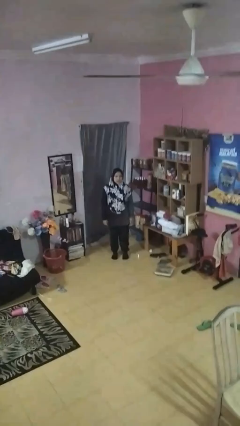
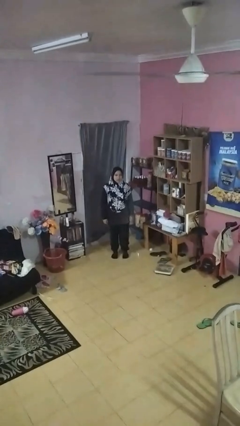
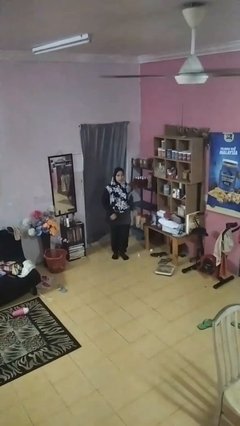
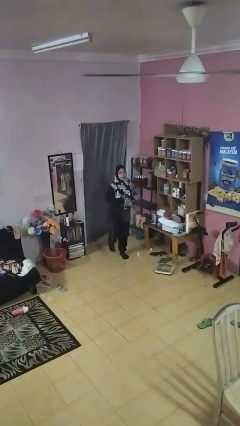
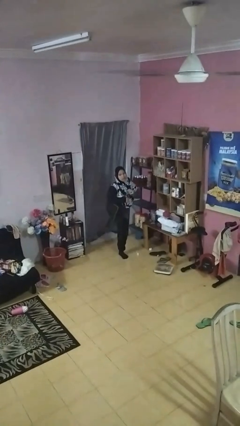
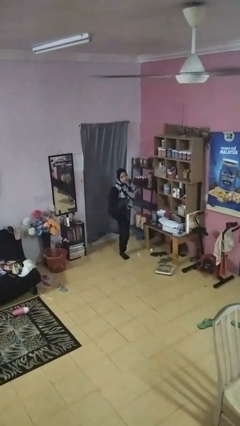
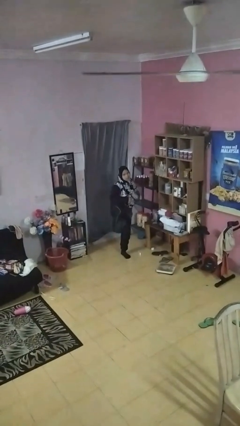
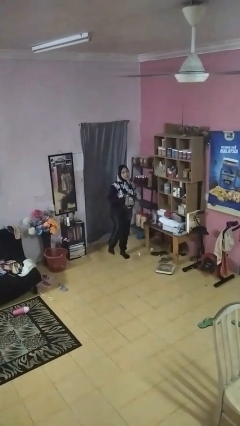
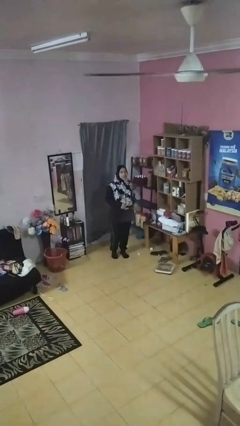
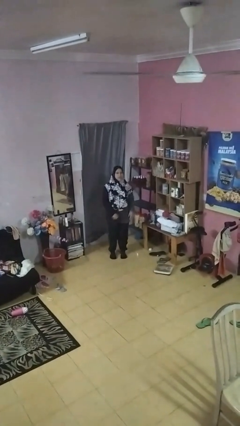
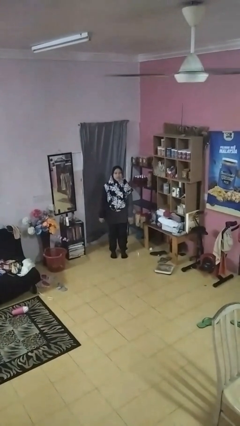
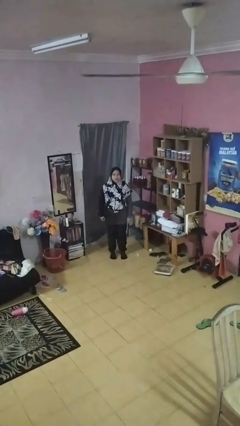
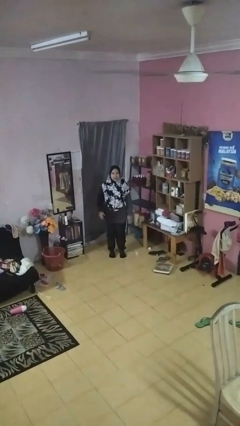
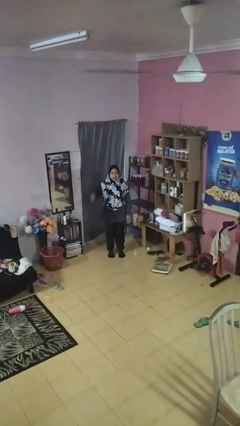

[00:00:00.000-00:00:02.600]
person karate kicks

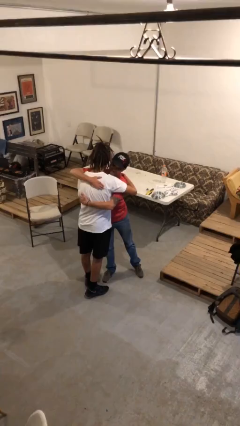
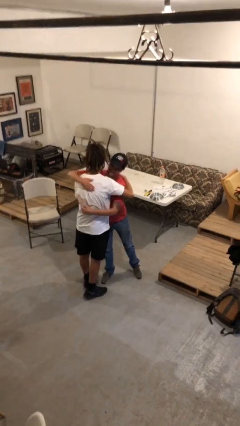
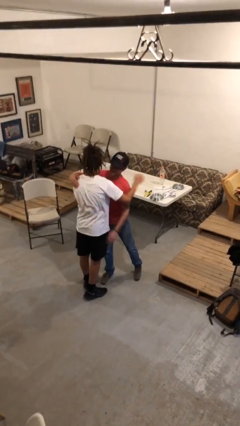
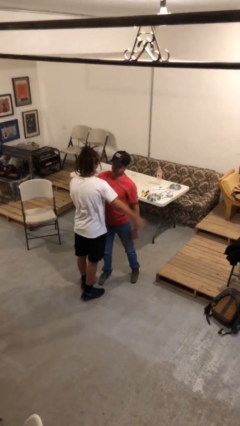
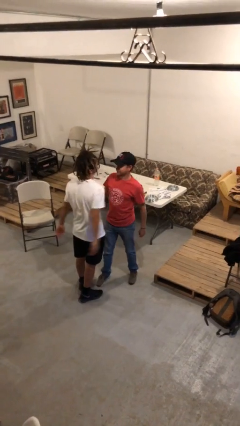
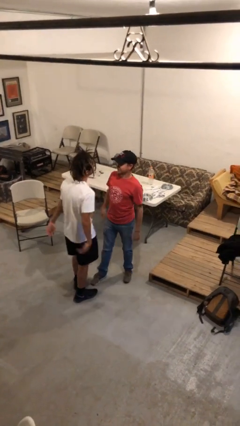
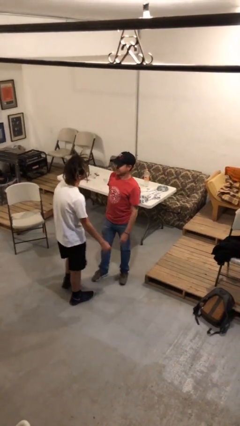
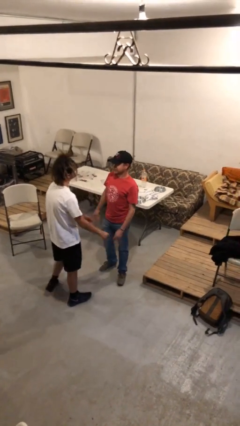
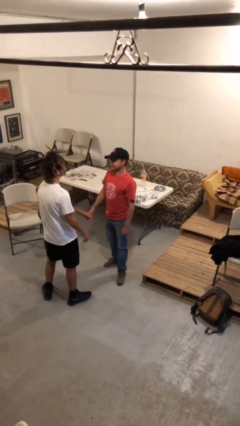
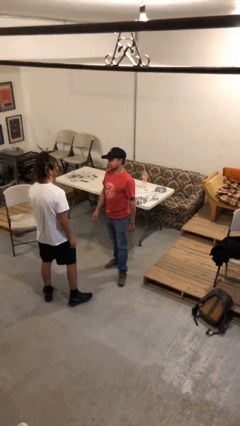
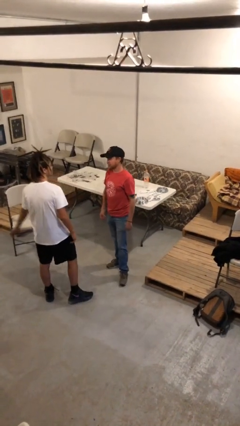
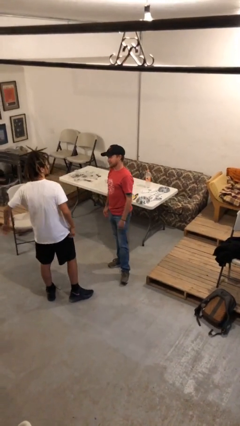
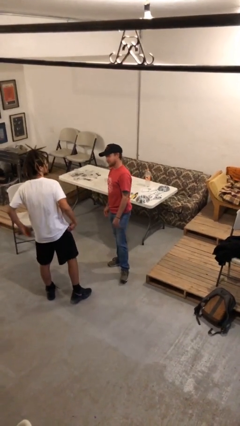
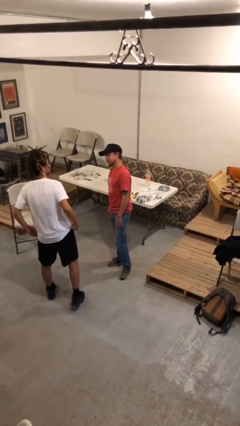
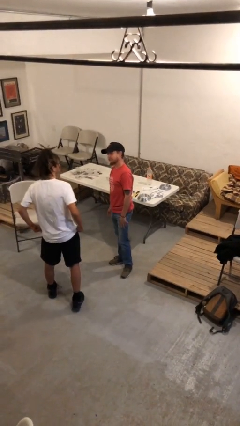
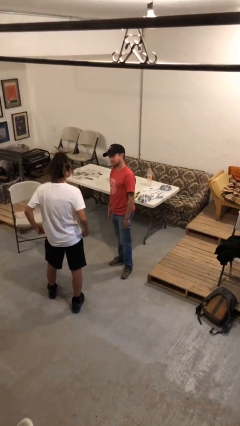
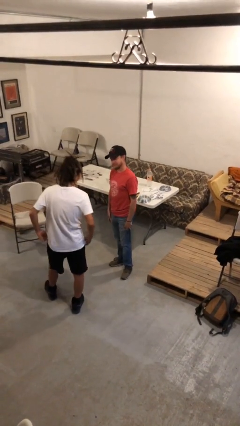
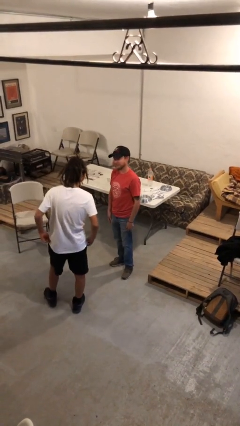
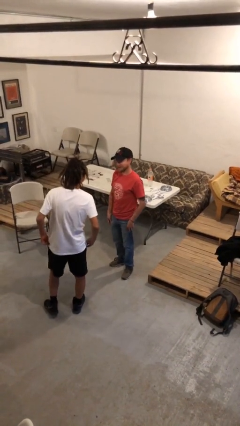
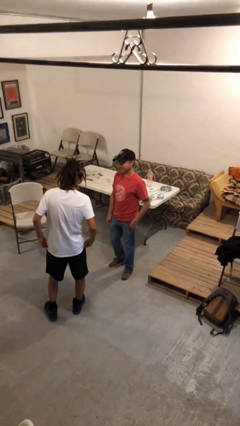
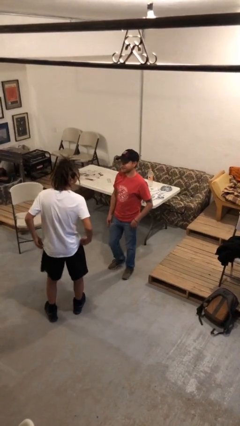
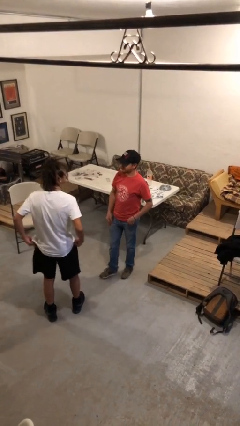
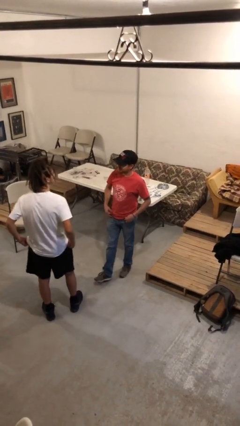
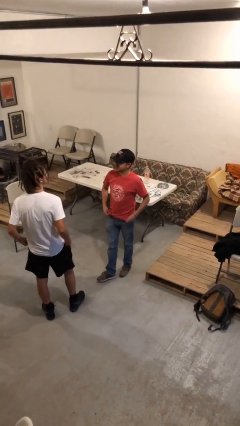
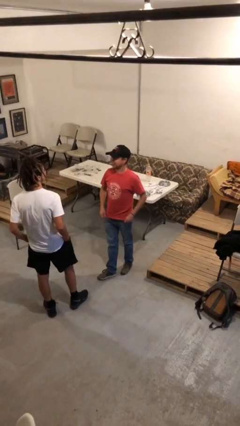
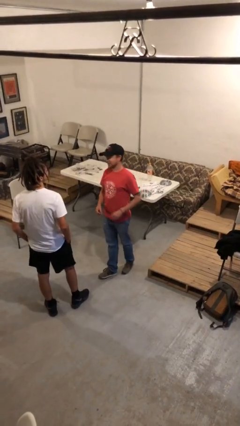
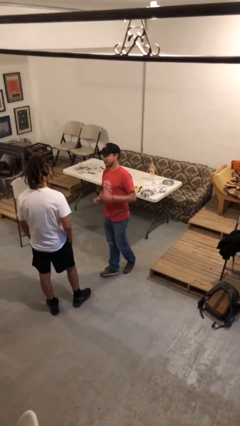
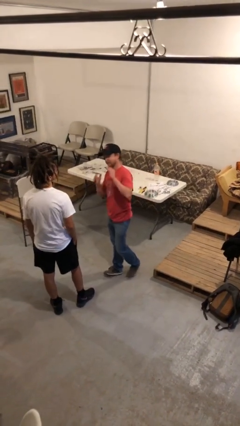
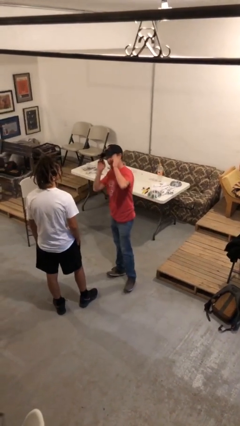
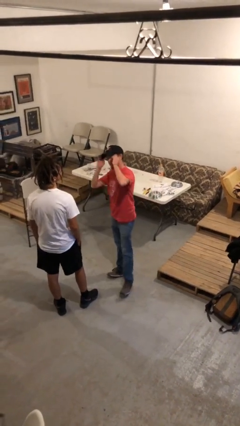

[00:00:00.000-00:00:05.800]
person talks to person

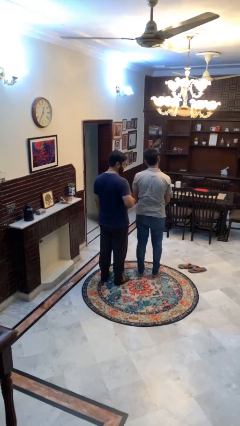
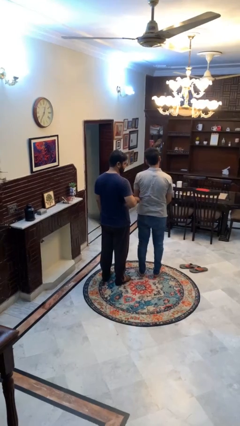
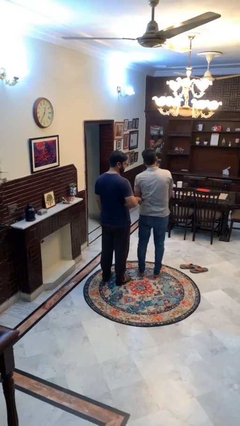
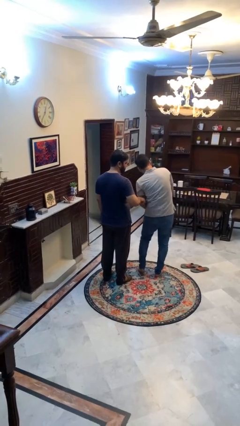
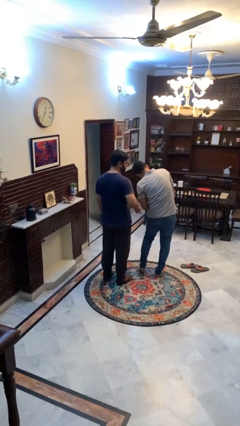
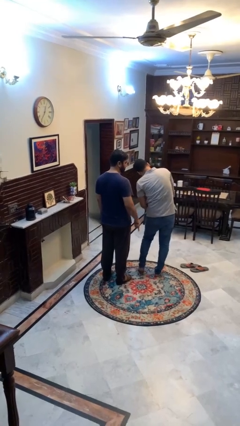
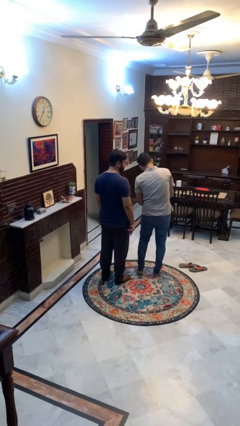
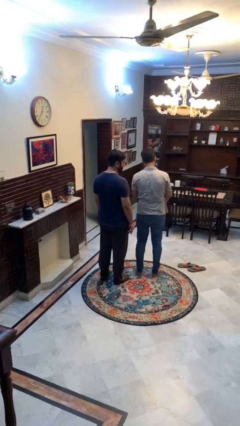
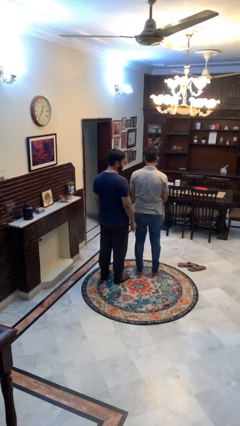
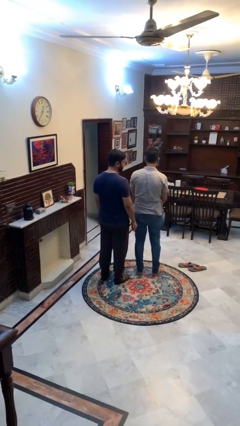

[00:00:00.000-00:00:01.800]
person tickles person

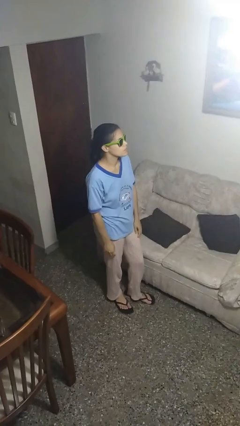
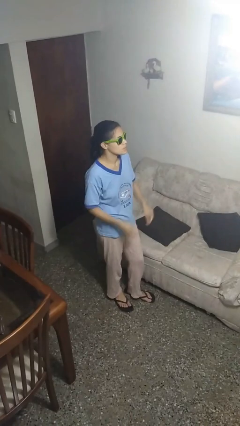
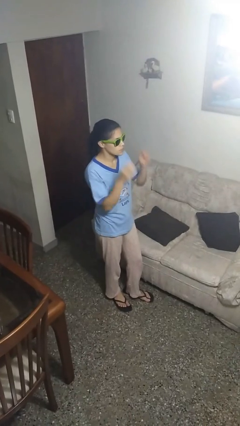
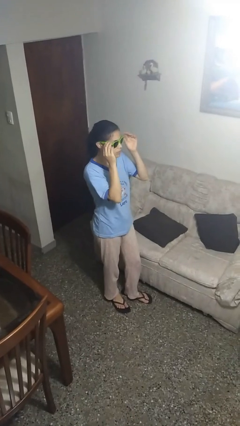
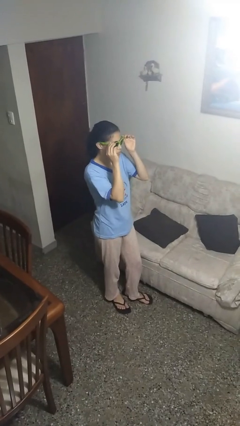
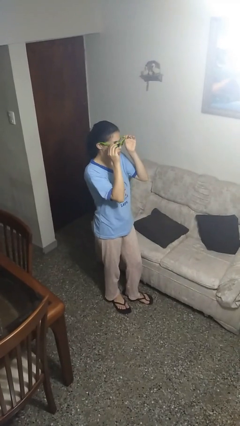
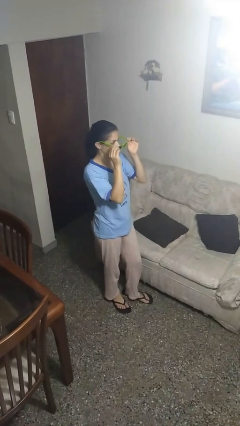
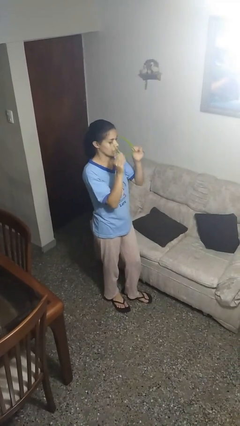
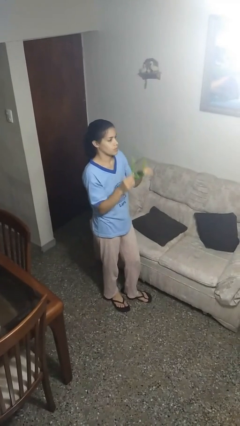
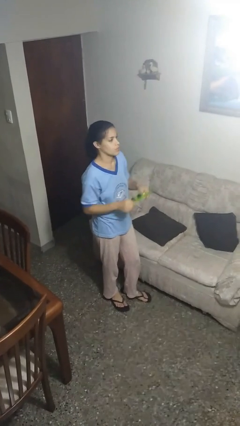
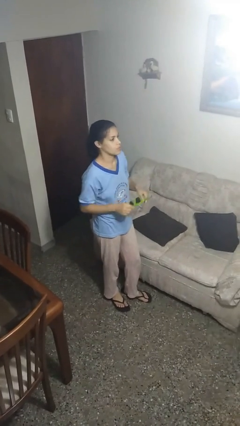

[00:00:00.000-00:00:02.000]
person takes off sunglasses

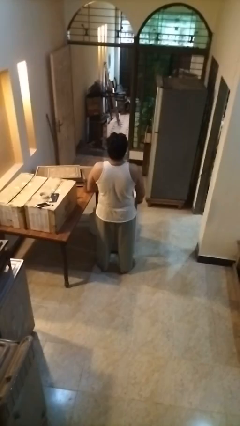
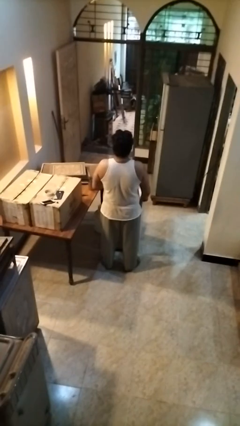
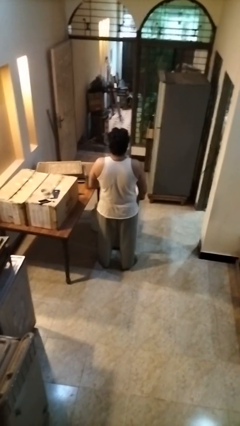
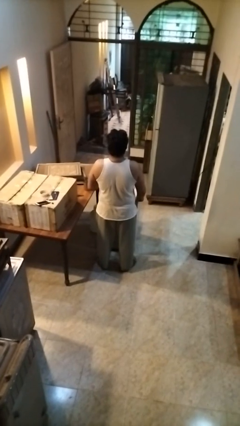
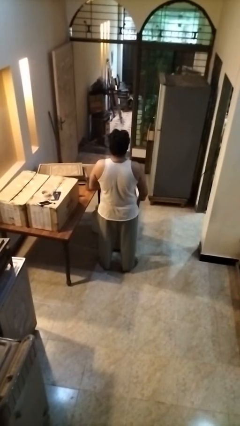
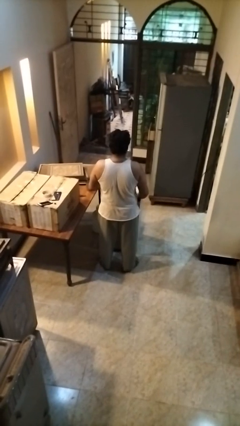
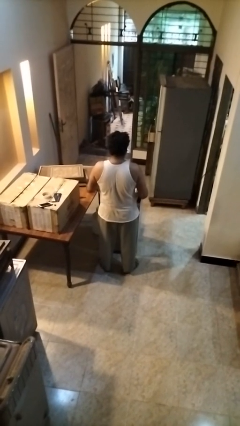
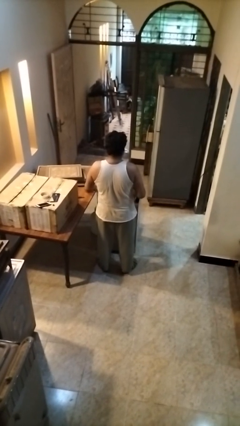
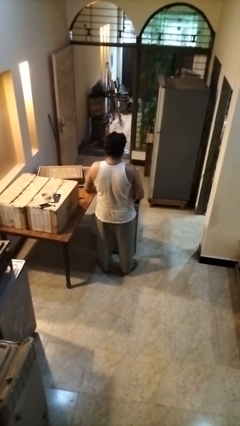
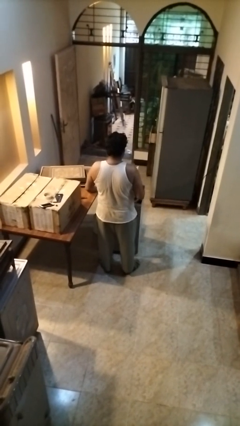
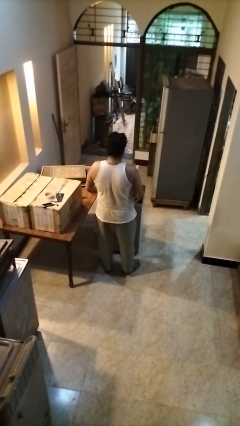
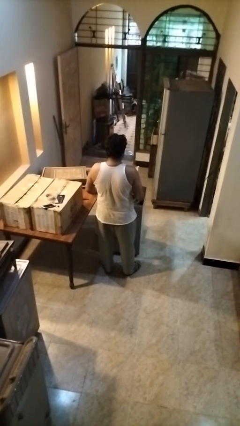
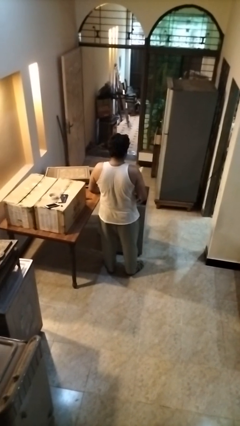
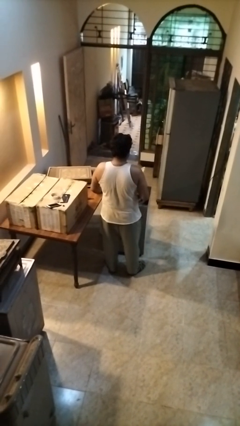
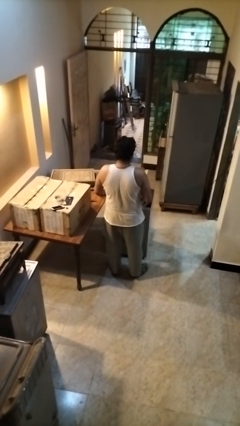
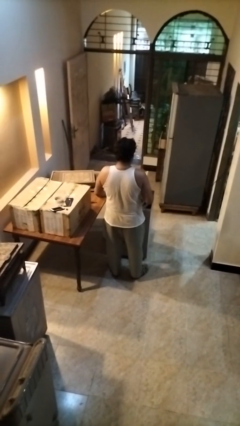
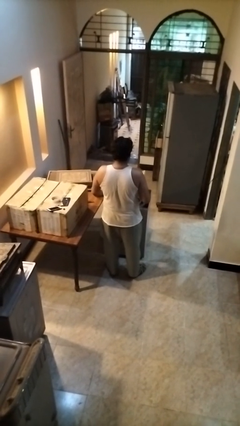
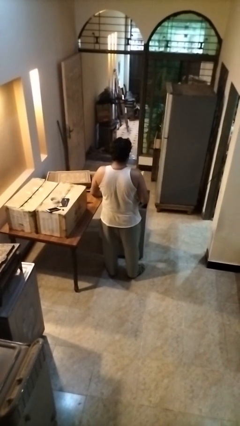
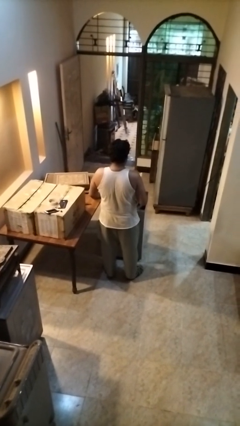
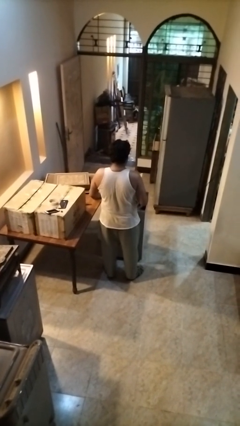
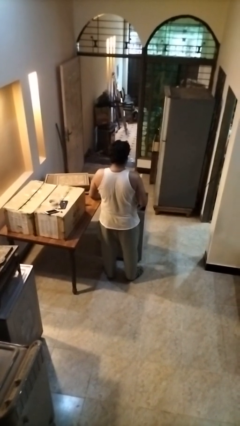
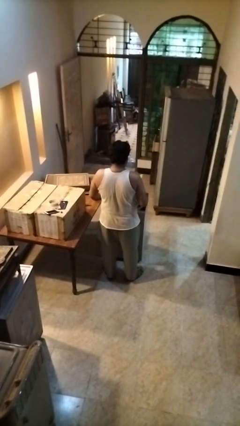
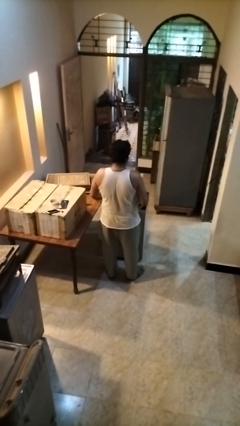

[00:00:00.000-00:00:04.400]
person opens clothes washer

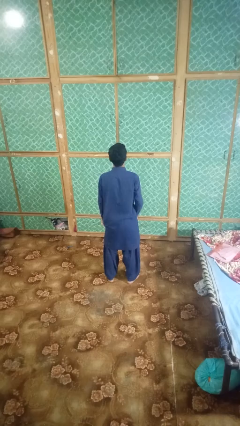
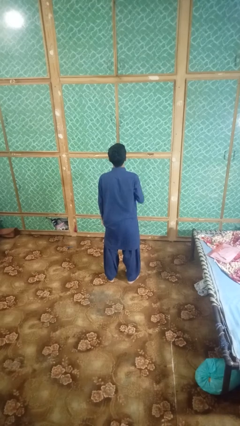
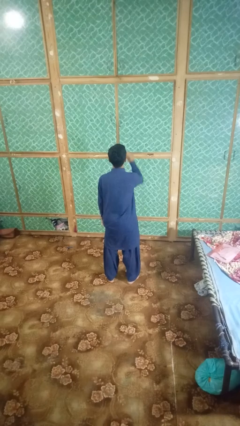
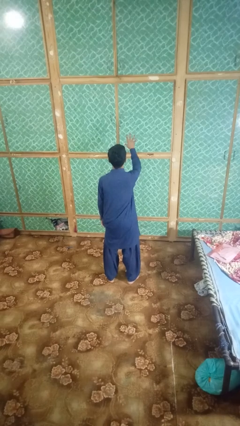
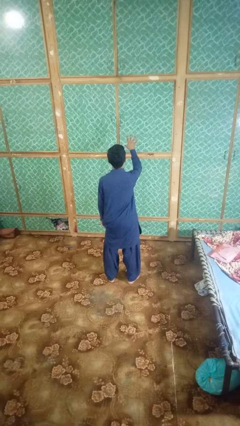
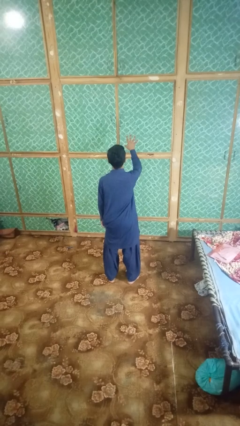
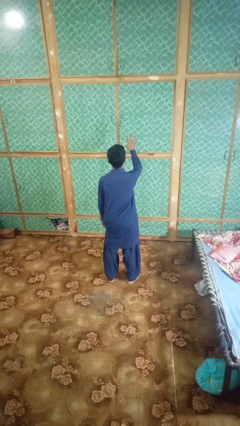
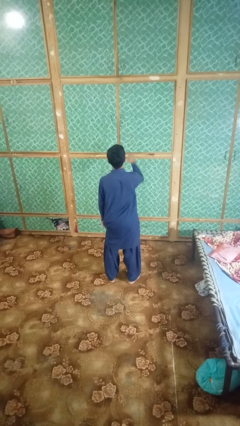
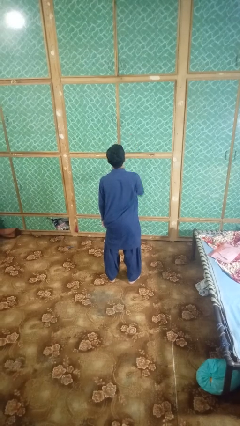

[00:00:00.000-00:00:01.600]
person gestures number five
